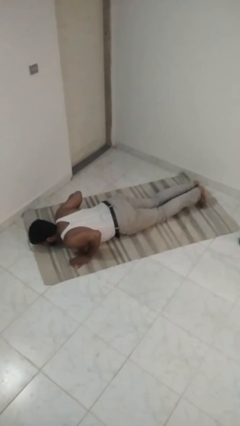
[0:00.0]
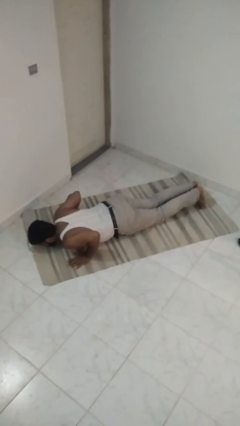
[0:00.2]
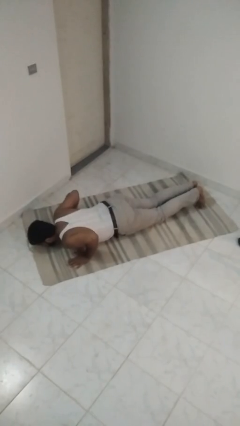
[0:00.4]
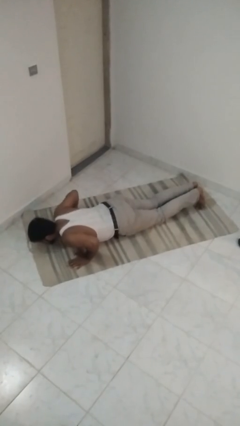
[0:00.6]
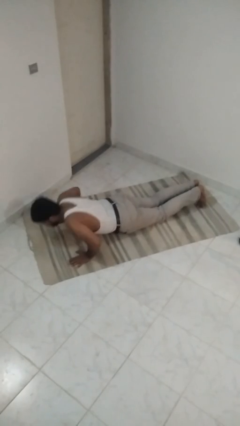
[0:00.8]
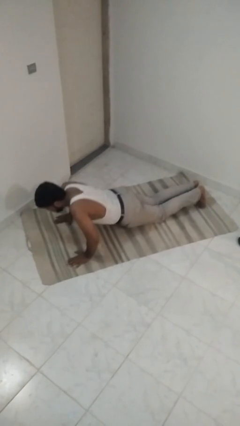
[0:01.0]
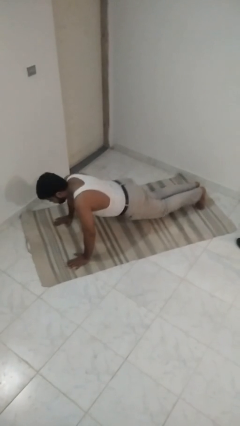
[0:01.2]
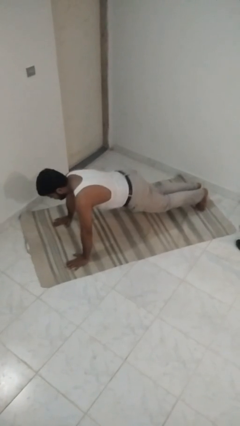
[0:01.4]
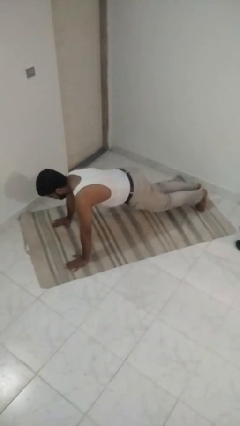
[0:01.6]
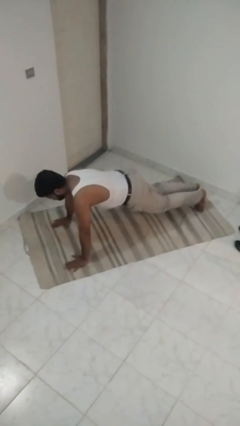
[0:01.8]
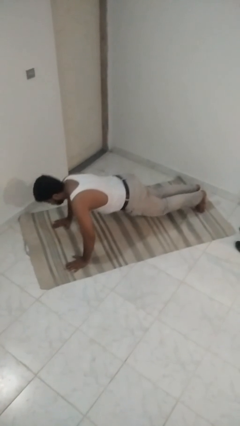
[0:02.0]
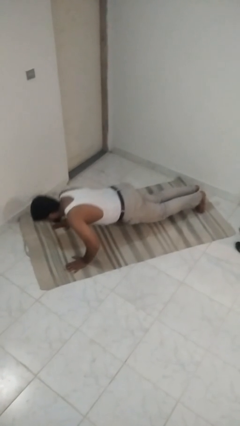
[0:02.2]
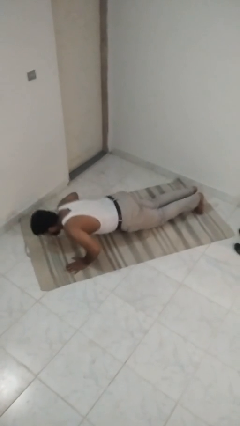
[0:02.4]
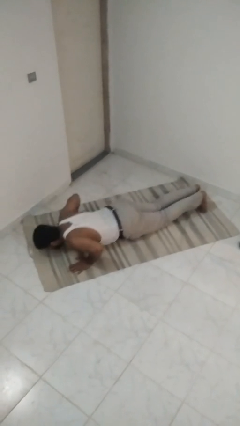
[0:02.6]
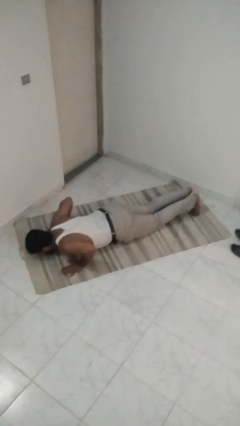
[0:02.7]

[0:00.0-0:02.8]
person exercises with pushup

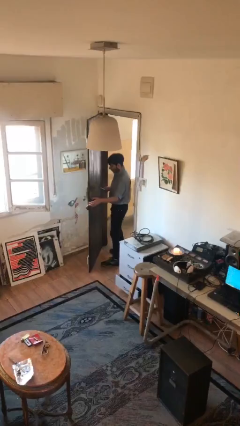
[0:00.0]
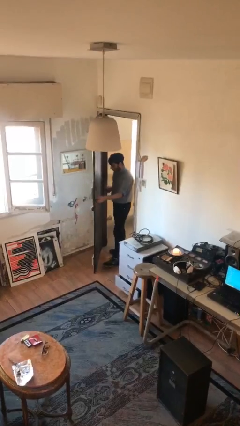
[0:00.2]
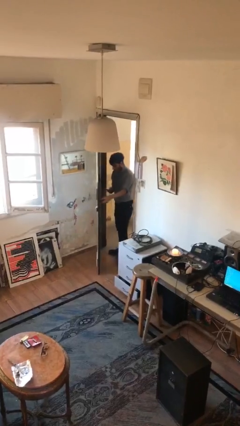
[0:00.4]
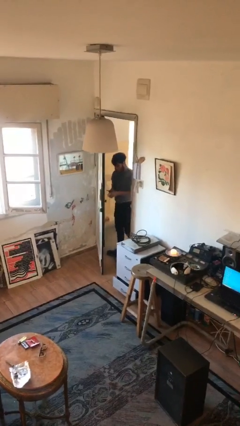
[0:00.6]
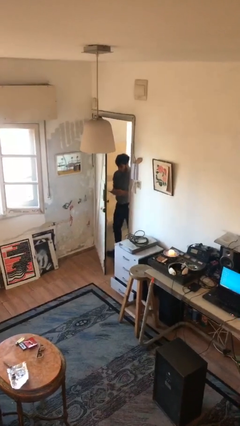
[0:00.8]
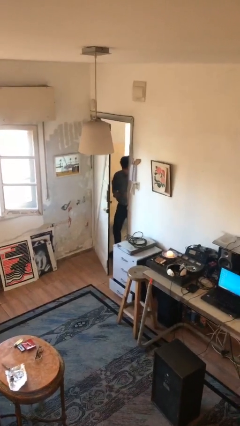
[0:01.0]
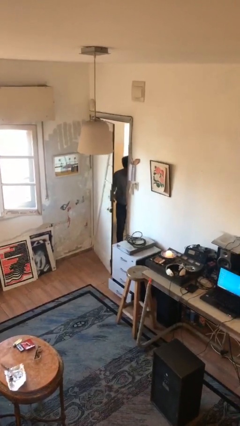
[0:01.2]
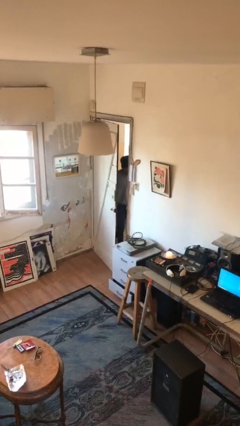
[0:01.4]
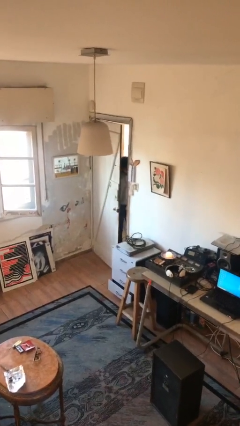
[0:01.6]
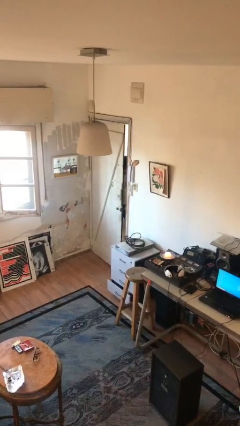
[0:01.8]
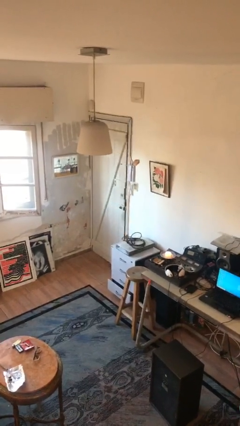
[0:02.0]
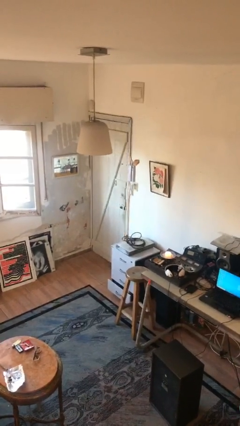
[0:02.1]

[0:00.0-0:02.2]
person closes facility door

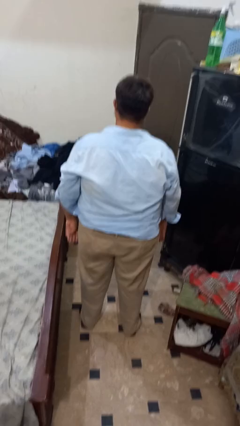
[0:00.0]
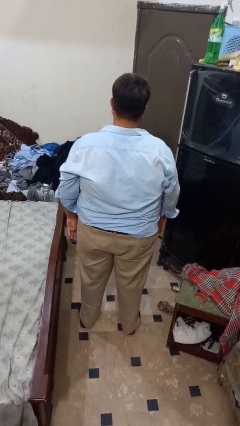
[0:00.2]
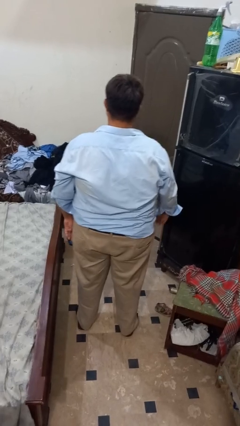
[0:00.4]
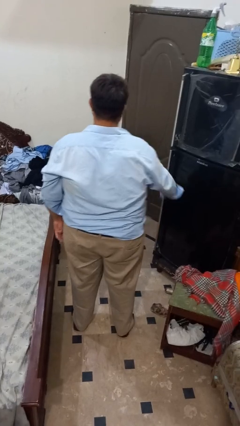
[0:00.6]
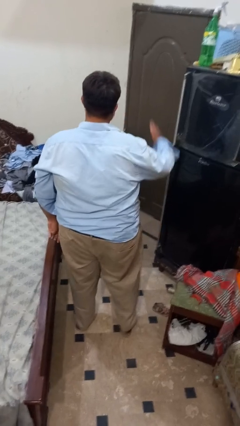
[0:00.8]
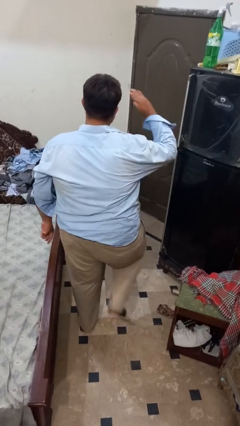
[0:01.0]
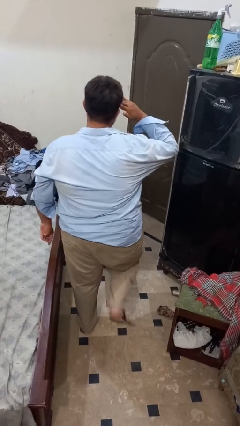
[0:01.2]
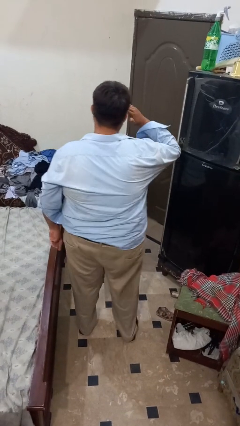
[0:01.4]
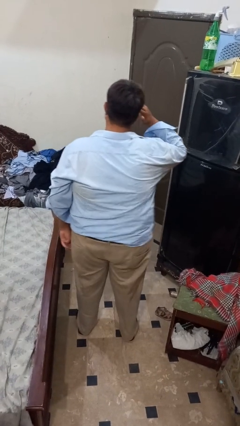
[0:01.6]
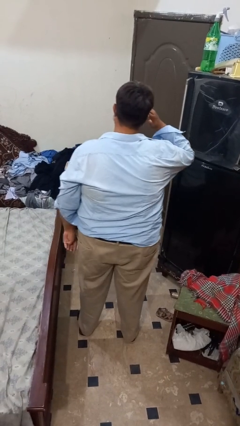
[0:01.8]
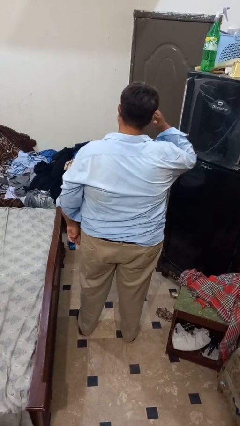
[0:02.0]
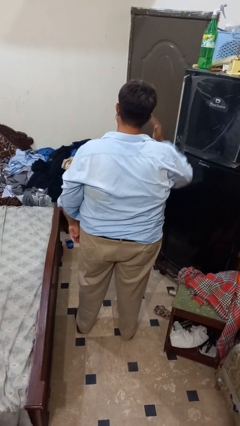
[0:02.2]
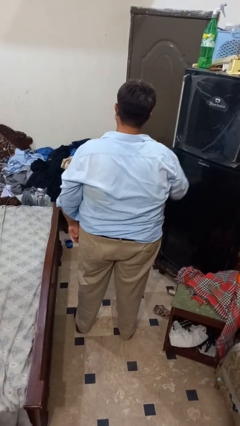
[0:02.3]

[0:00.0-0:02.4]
person salutes

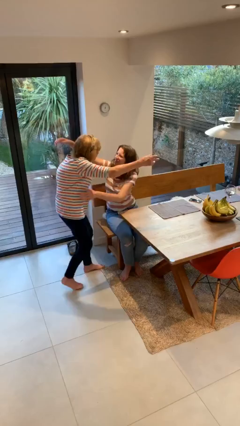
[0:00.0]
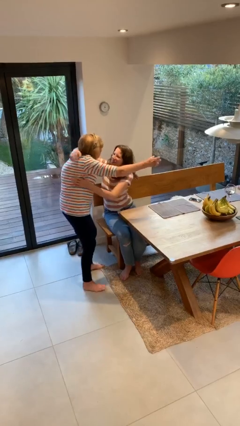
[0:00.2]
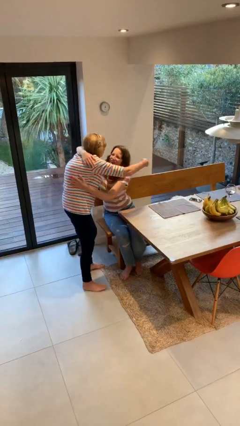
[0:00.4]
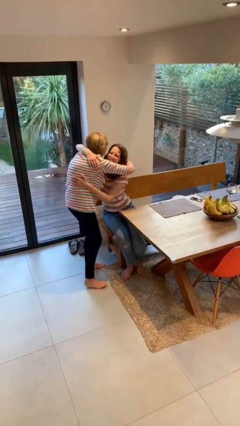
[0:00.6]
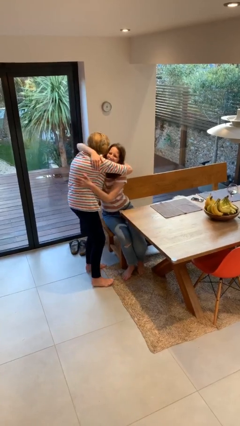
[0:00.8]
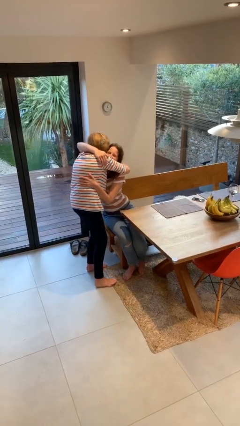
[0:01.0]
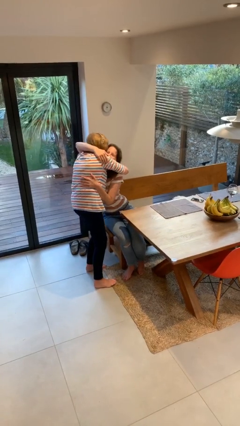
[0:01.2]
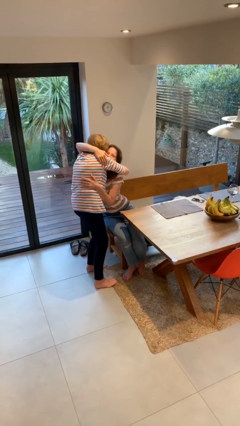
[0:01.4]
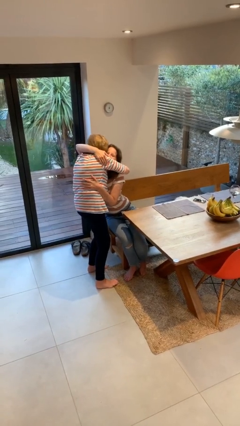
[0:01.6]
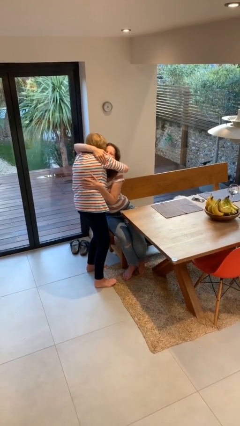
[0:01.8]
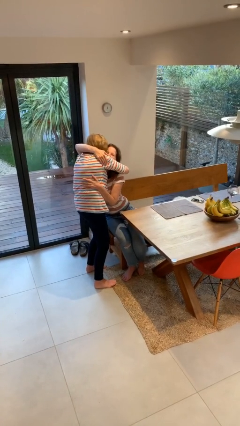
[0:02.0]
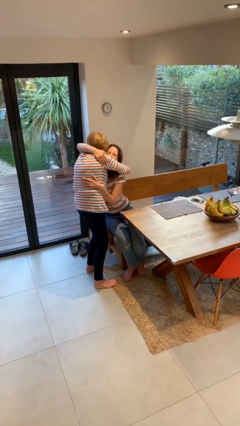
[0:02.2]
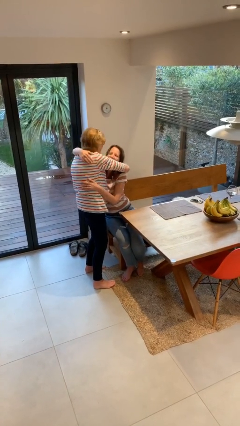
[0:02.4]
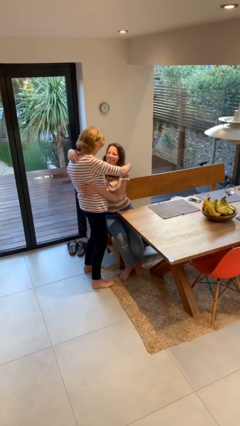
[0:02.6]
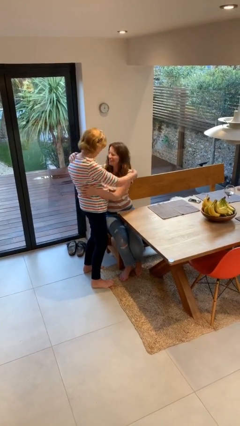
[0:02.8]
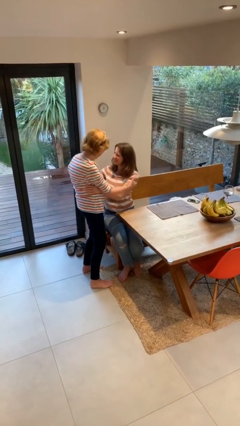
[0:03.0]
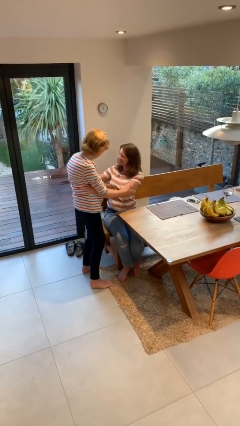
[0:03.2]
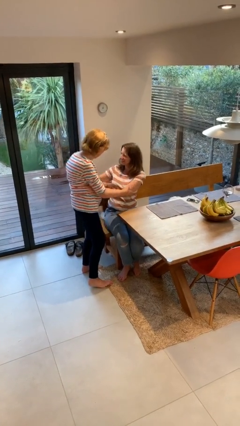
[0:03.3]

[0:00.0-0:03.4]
person embraces person

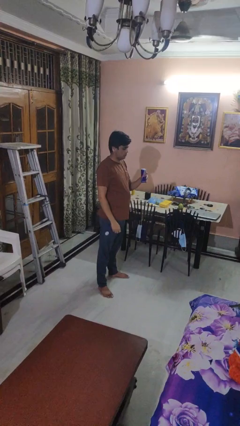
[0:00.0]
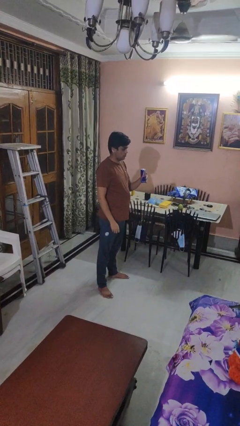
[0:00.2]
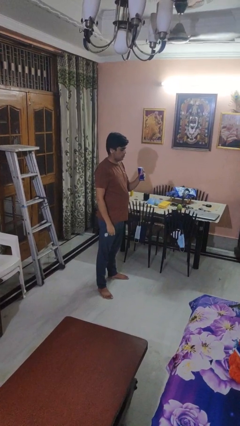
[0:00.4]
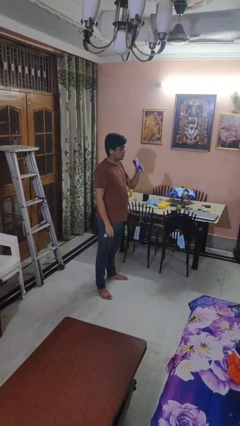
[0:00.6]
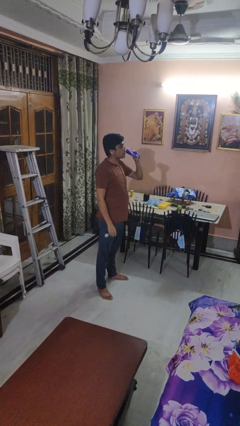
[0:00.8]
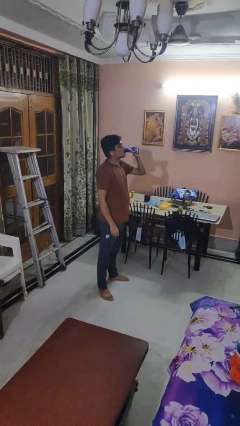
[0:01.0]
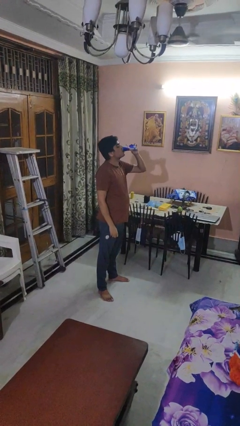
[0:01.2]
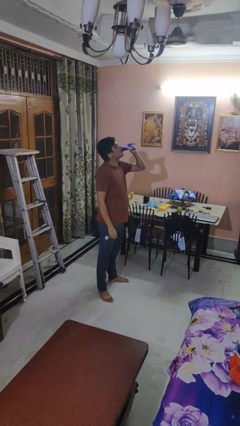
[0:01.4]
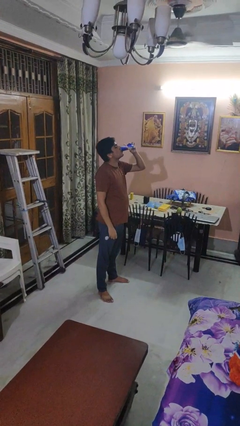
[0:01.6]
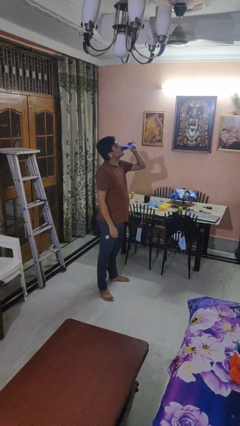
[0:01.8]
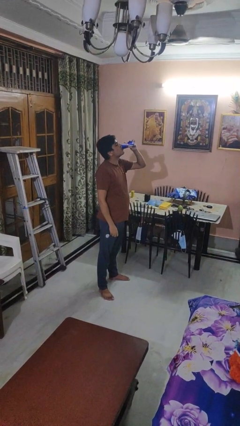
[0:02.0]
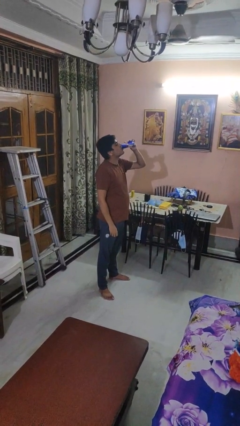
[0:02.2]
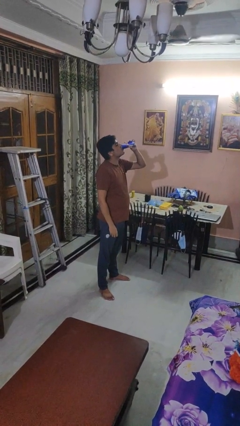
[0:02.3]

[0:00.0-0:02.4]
person drinks from beverage can

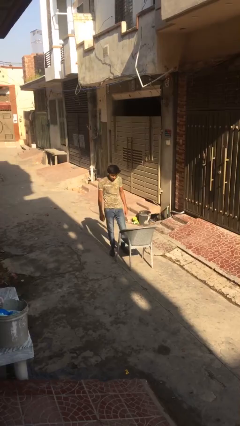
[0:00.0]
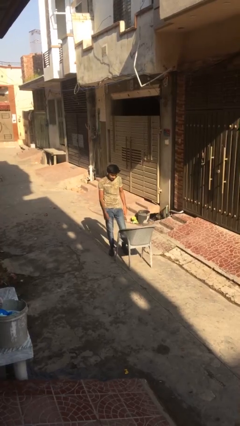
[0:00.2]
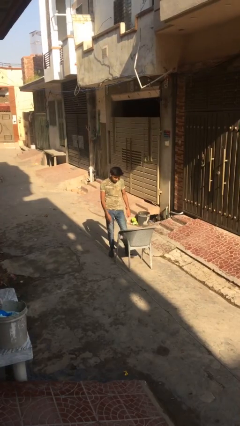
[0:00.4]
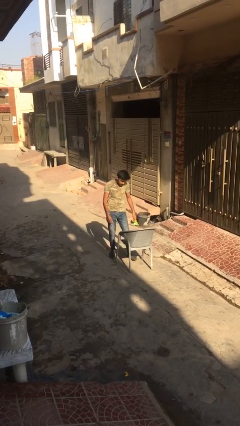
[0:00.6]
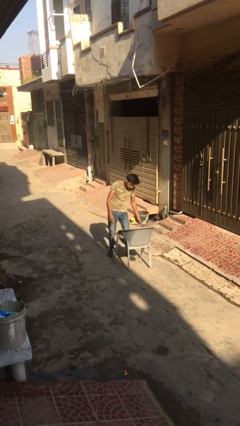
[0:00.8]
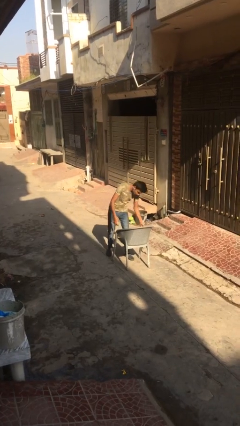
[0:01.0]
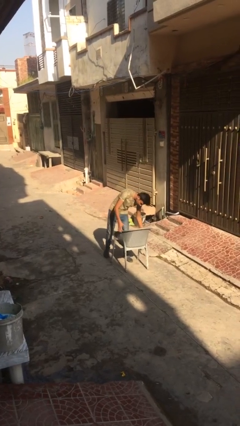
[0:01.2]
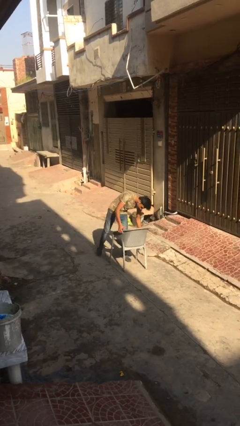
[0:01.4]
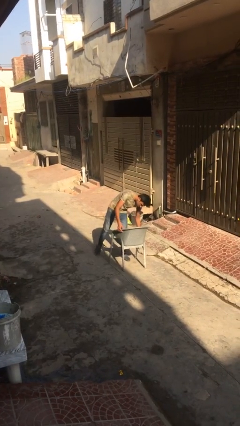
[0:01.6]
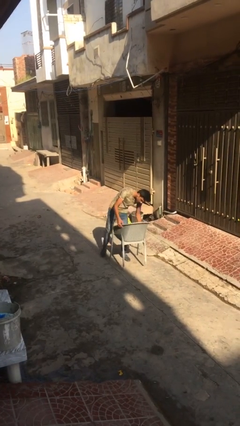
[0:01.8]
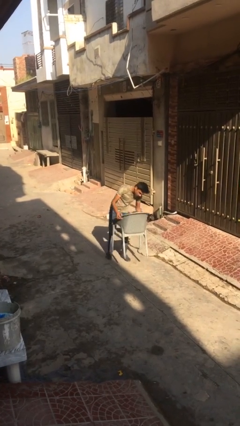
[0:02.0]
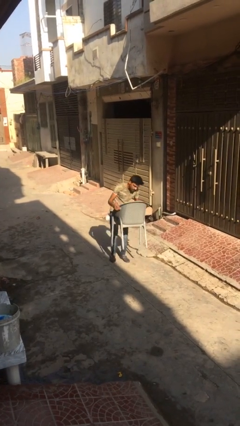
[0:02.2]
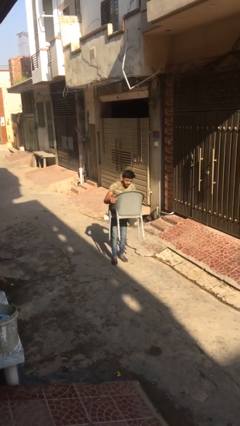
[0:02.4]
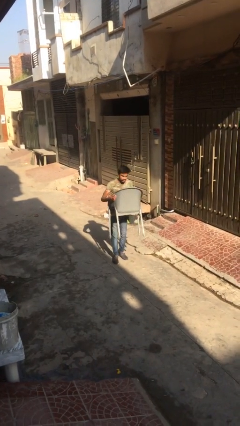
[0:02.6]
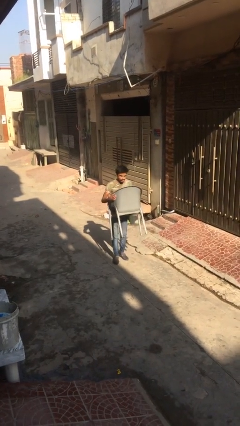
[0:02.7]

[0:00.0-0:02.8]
person picks up object from floor

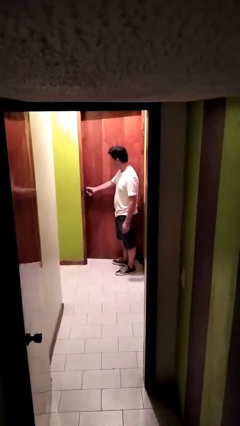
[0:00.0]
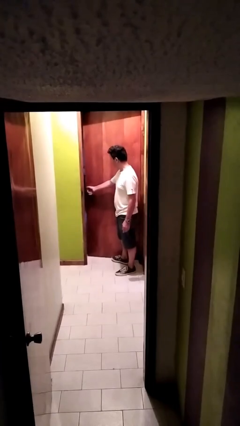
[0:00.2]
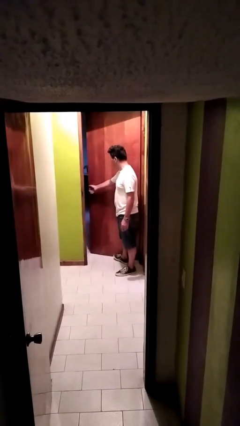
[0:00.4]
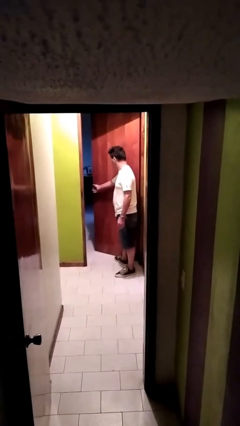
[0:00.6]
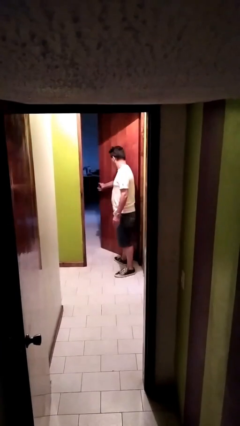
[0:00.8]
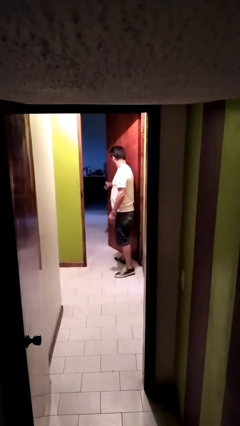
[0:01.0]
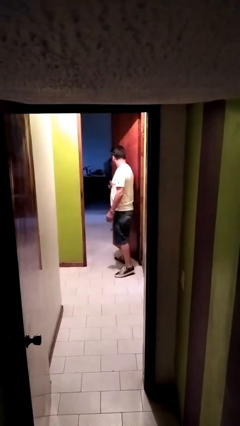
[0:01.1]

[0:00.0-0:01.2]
person opens facility door
